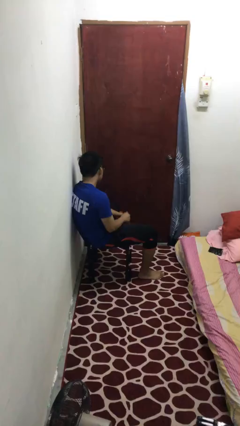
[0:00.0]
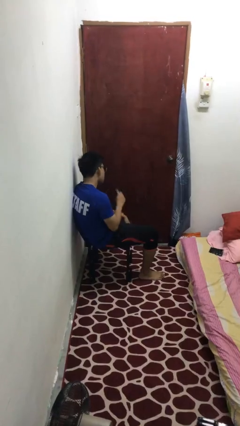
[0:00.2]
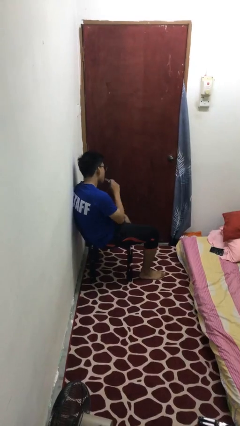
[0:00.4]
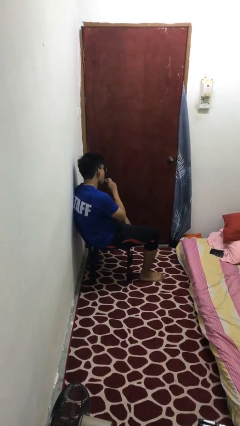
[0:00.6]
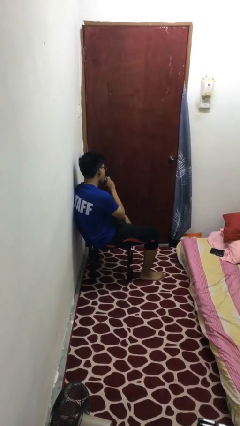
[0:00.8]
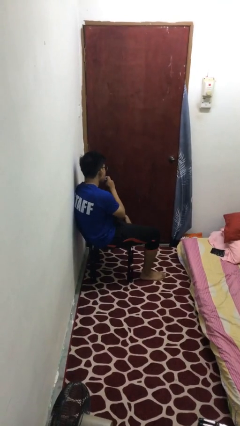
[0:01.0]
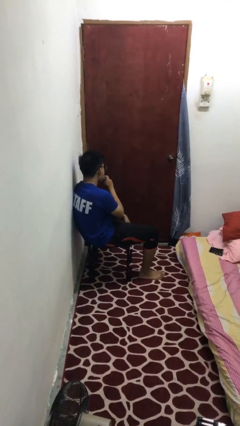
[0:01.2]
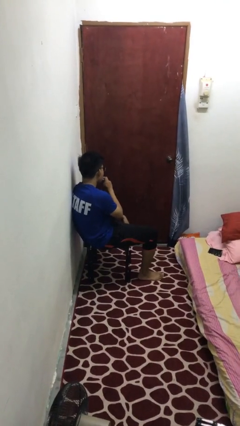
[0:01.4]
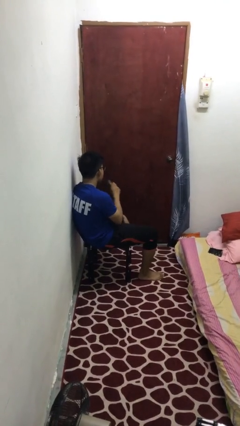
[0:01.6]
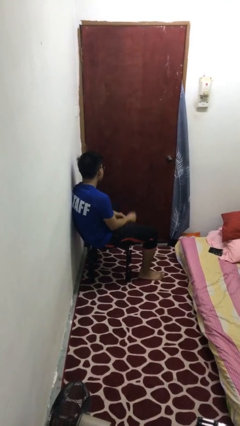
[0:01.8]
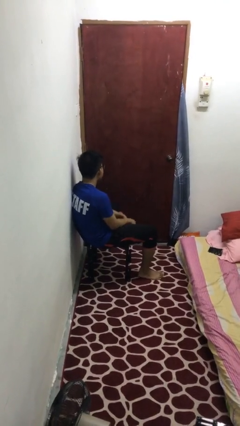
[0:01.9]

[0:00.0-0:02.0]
person vapes

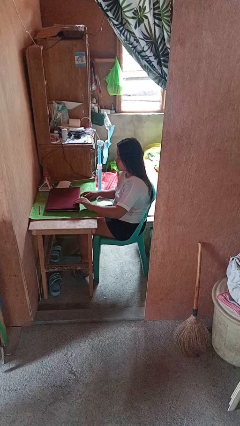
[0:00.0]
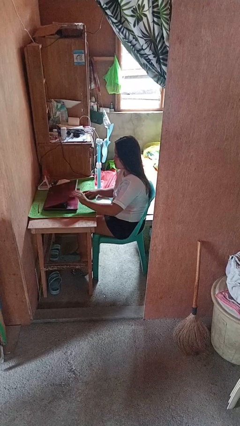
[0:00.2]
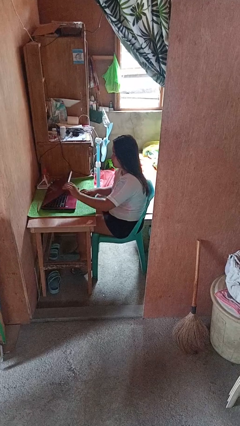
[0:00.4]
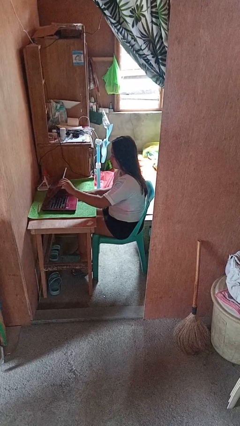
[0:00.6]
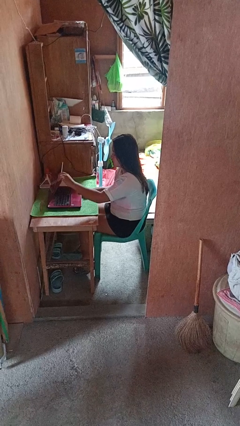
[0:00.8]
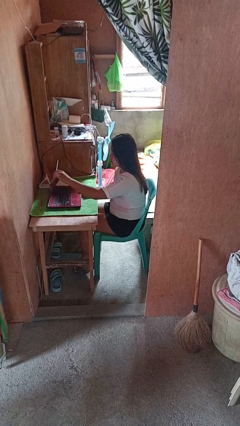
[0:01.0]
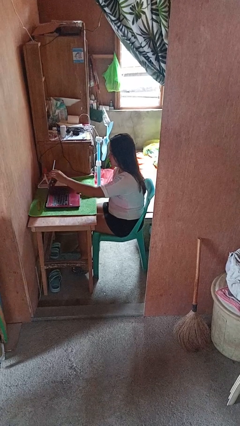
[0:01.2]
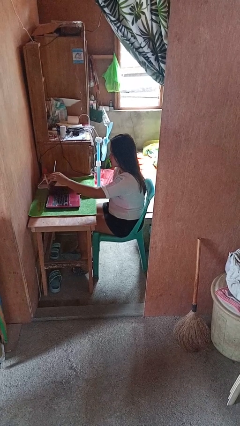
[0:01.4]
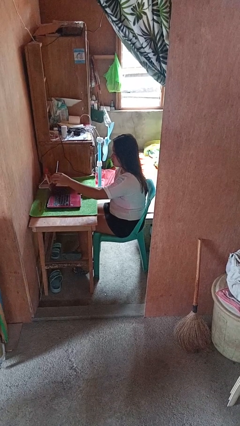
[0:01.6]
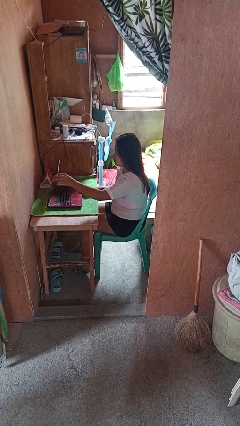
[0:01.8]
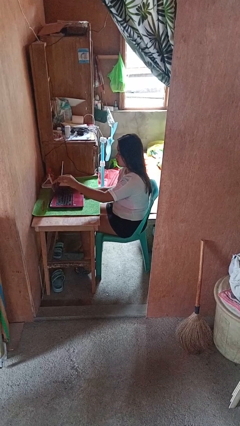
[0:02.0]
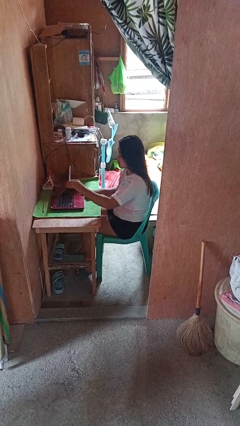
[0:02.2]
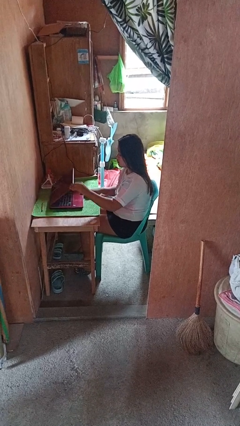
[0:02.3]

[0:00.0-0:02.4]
person opens laptop

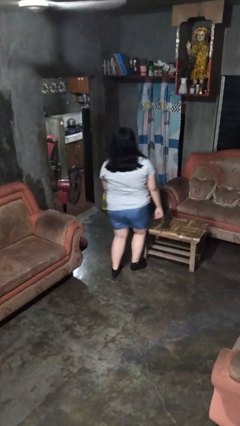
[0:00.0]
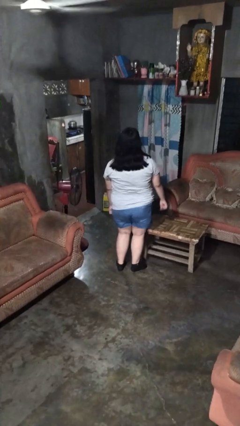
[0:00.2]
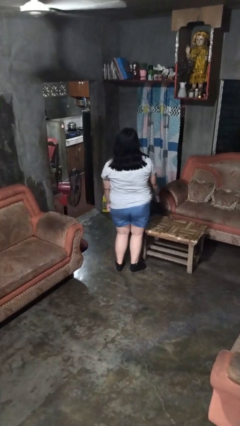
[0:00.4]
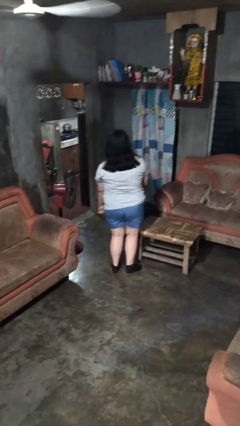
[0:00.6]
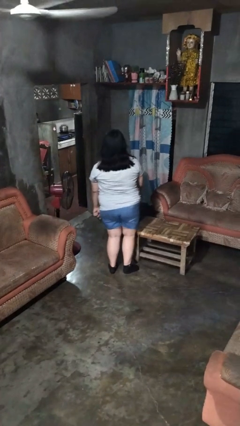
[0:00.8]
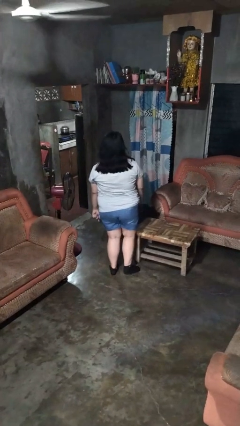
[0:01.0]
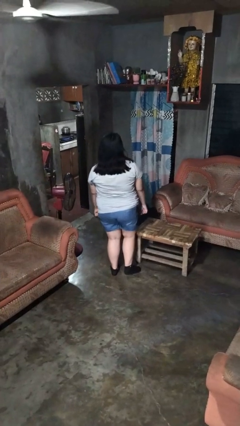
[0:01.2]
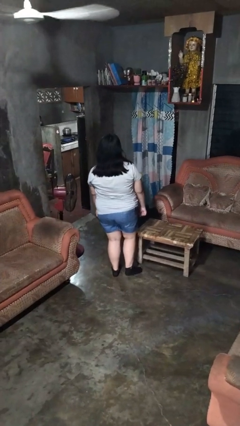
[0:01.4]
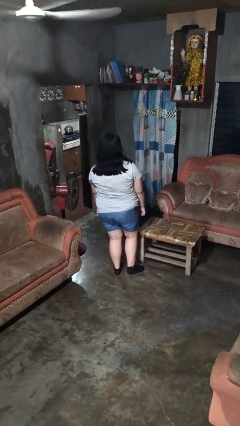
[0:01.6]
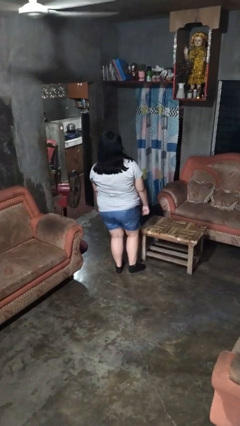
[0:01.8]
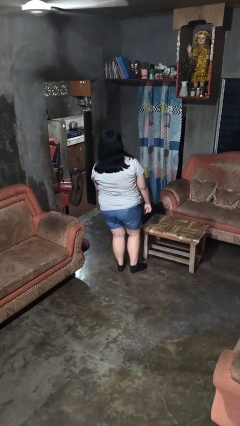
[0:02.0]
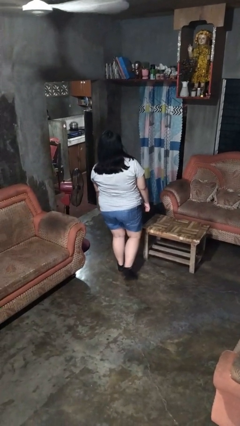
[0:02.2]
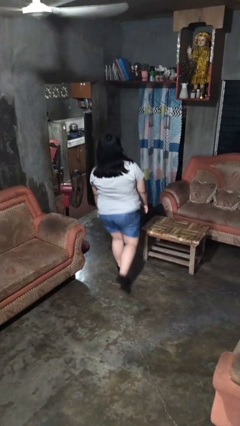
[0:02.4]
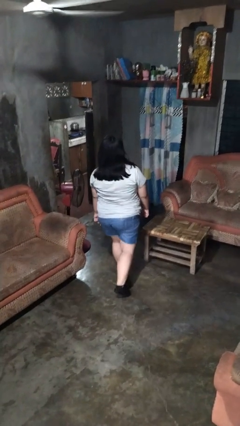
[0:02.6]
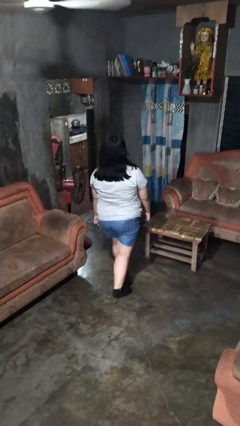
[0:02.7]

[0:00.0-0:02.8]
person bumps into table

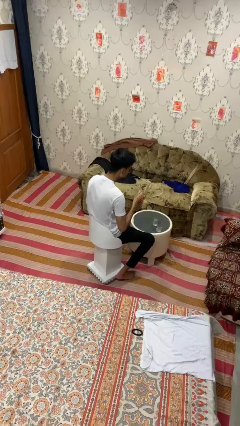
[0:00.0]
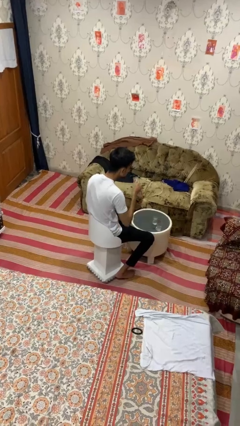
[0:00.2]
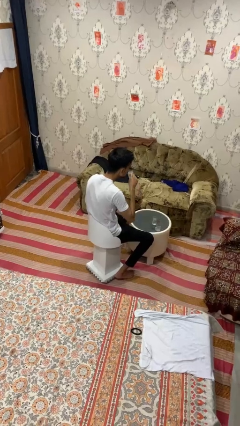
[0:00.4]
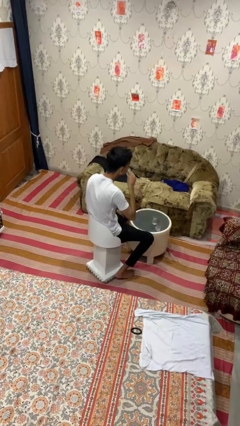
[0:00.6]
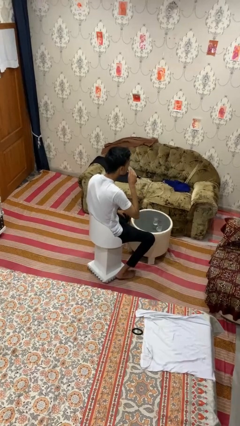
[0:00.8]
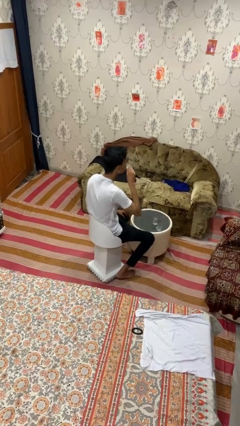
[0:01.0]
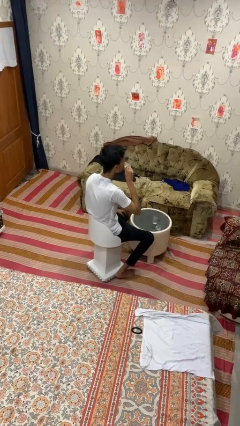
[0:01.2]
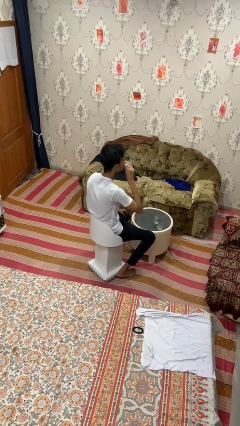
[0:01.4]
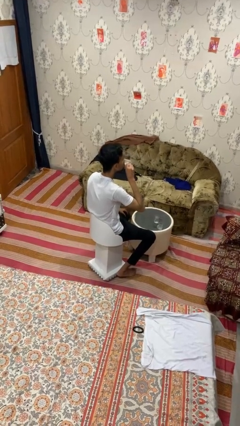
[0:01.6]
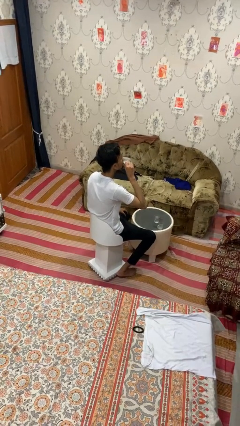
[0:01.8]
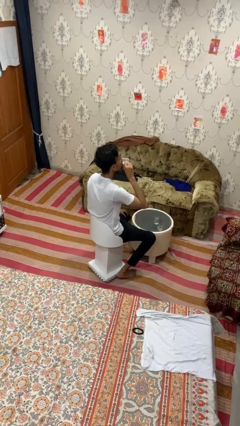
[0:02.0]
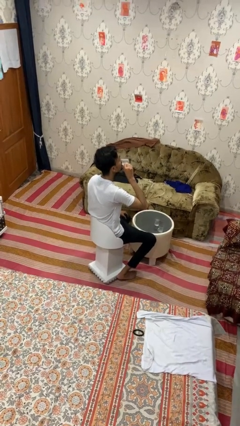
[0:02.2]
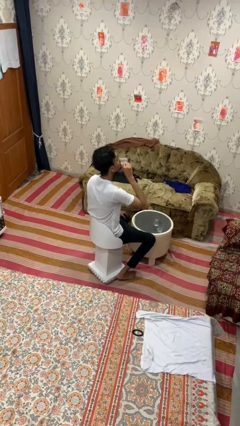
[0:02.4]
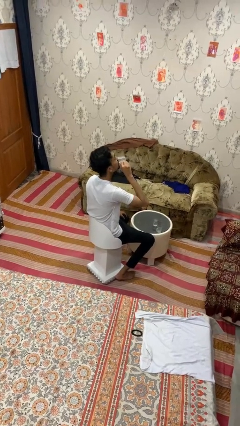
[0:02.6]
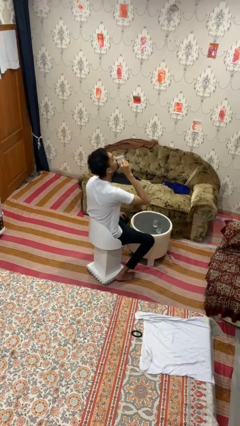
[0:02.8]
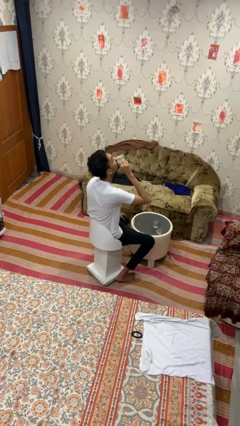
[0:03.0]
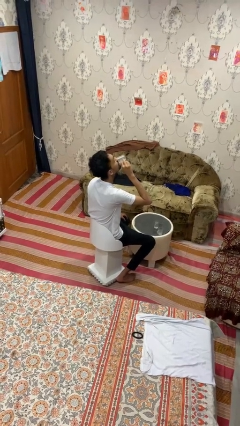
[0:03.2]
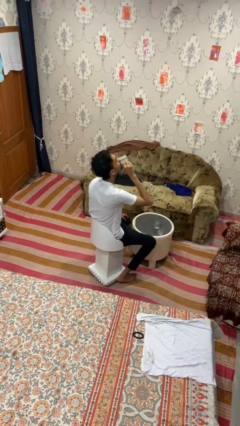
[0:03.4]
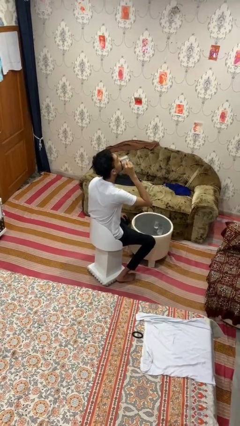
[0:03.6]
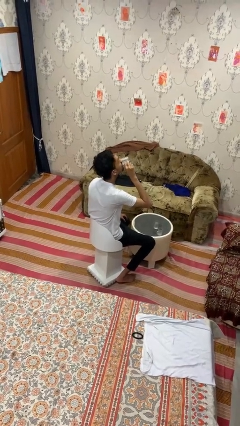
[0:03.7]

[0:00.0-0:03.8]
person drinks from shotglass

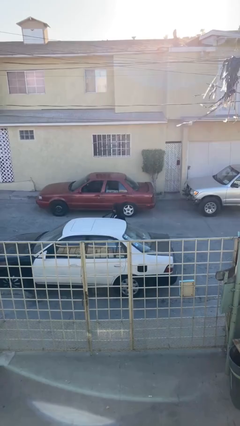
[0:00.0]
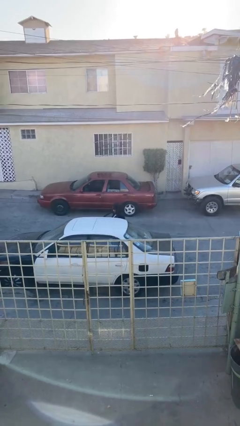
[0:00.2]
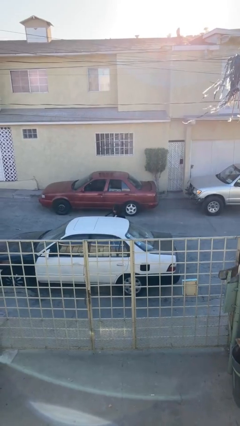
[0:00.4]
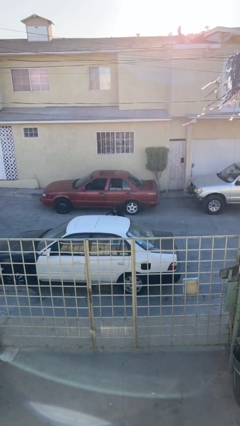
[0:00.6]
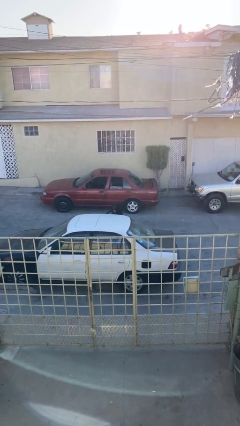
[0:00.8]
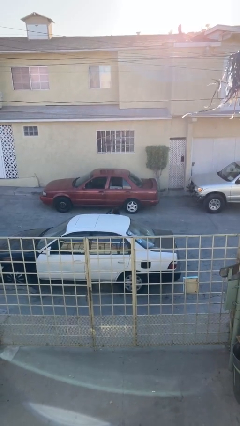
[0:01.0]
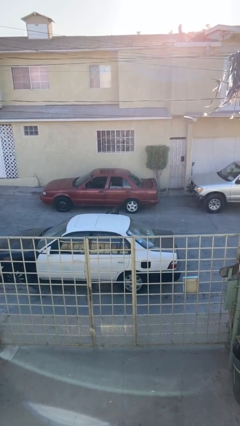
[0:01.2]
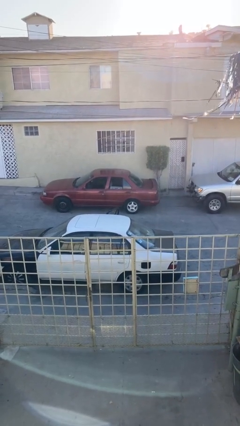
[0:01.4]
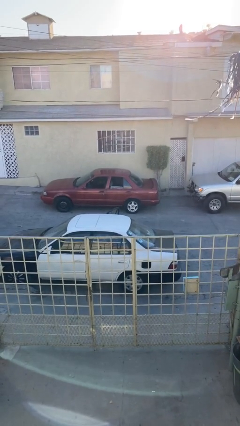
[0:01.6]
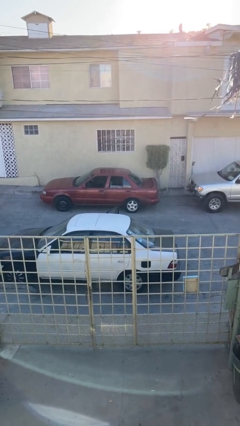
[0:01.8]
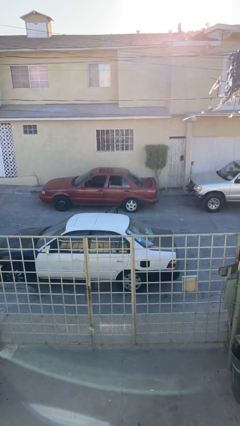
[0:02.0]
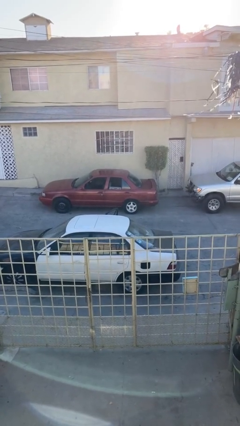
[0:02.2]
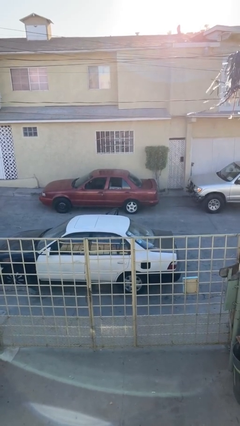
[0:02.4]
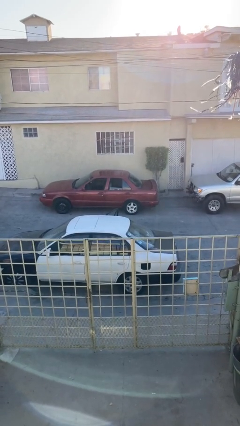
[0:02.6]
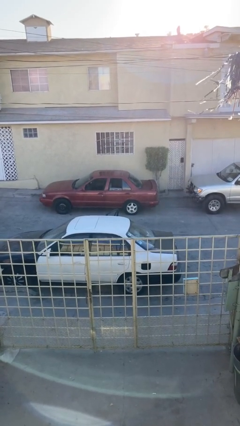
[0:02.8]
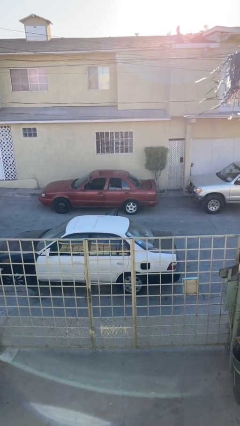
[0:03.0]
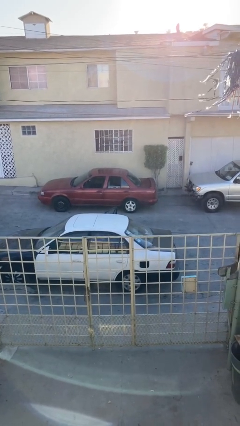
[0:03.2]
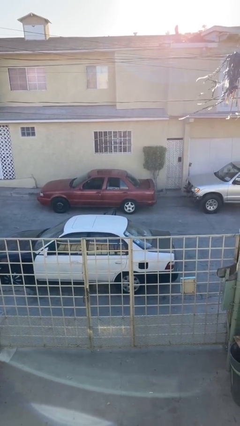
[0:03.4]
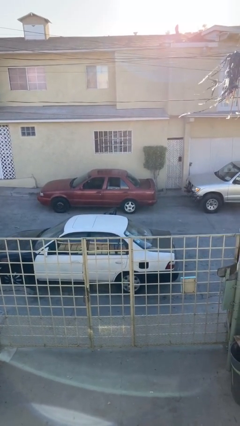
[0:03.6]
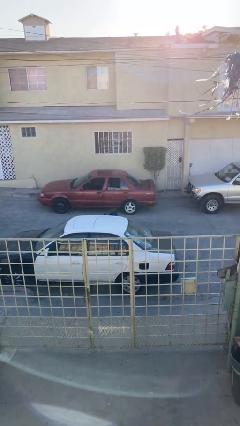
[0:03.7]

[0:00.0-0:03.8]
person enters car

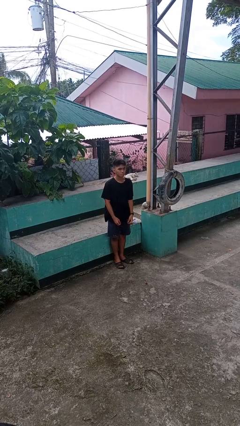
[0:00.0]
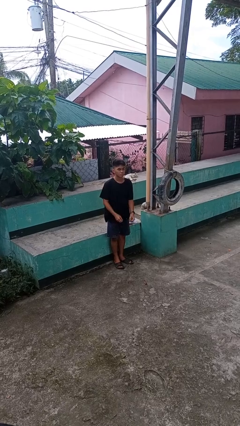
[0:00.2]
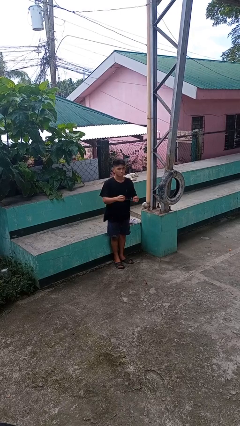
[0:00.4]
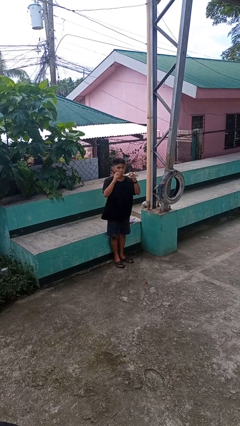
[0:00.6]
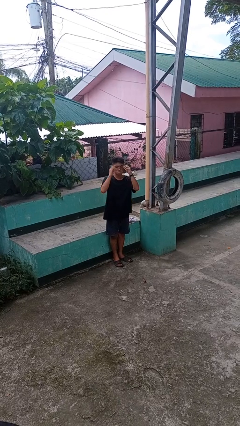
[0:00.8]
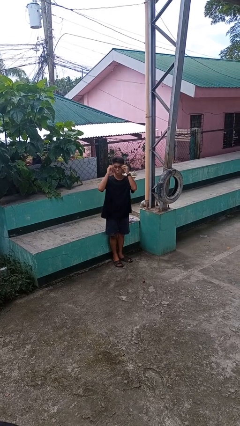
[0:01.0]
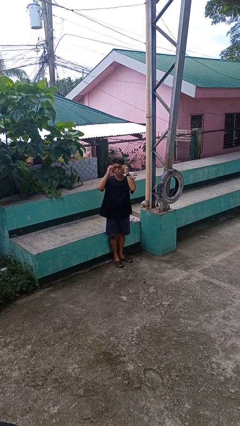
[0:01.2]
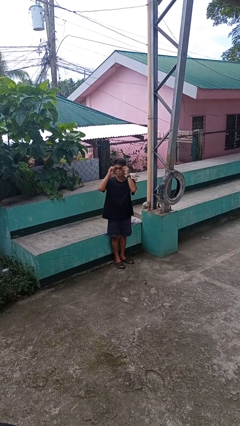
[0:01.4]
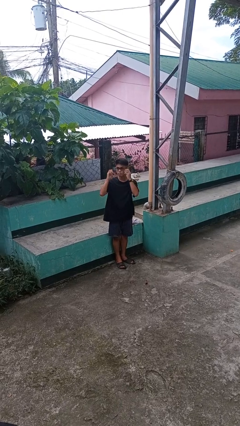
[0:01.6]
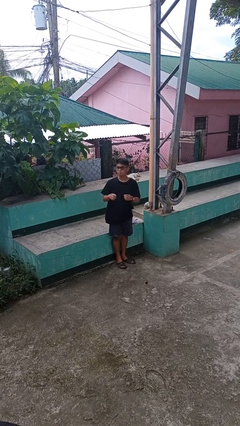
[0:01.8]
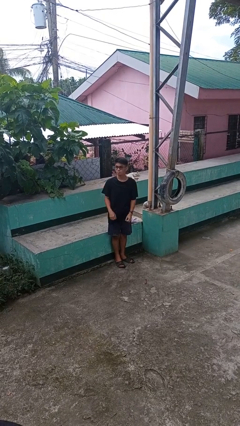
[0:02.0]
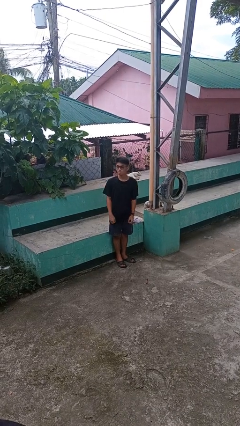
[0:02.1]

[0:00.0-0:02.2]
person puts on glasses

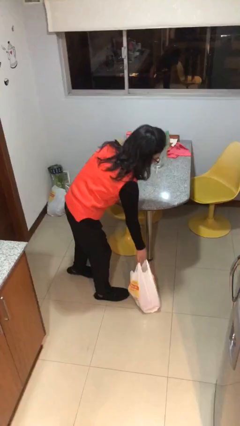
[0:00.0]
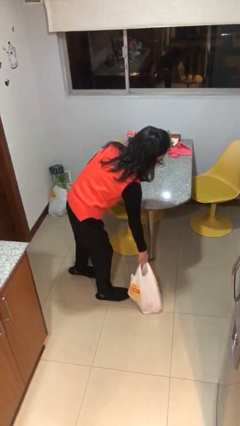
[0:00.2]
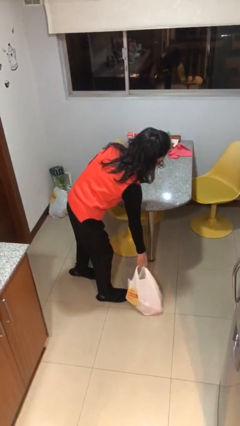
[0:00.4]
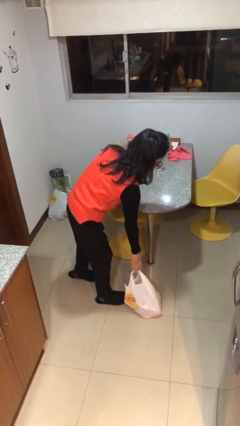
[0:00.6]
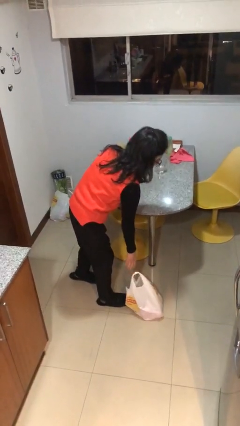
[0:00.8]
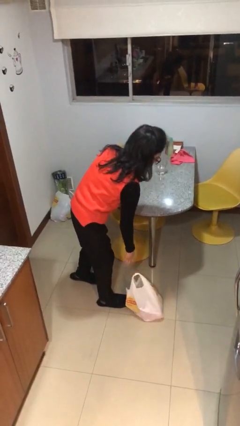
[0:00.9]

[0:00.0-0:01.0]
person puts down object on floor
